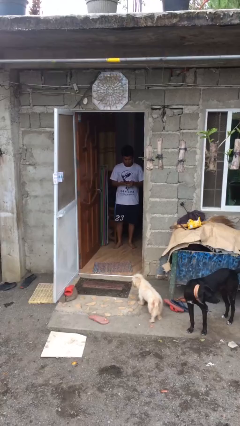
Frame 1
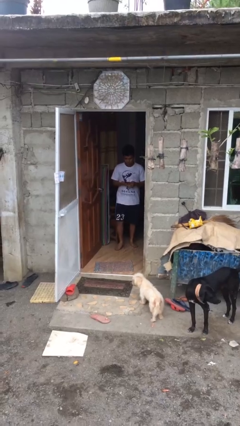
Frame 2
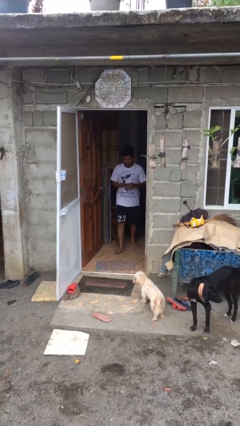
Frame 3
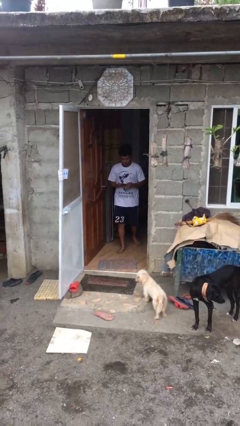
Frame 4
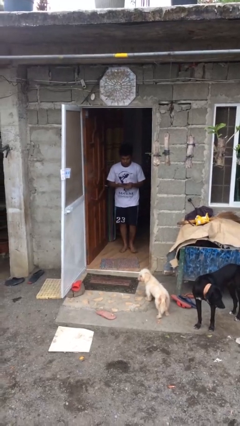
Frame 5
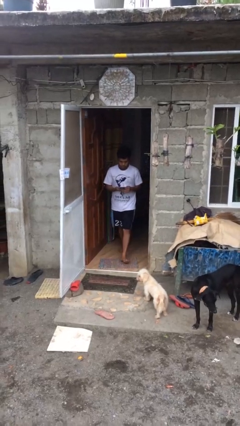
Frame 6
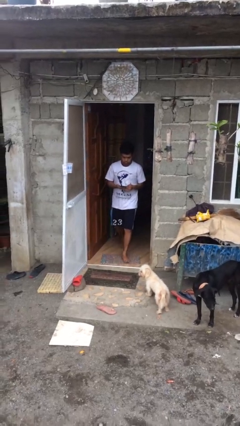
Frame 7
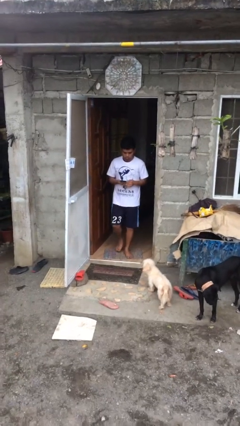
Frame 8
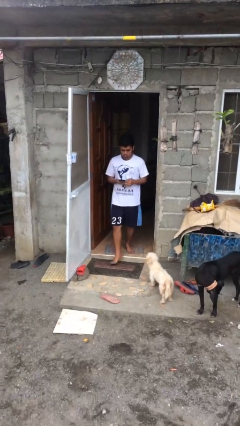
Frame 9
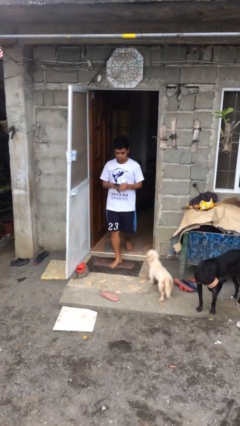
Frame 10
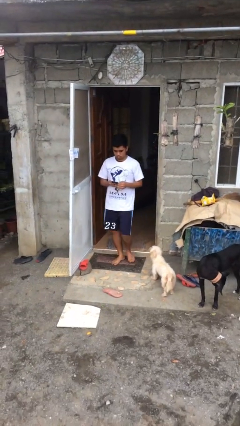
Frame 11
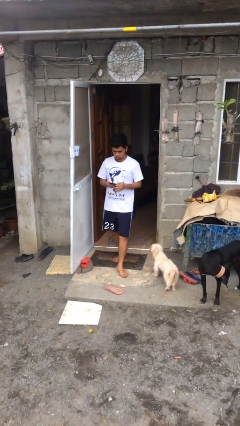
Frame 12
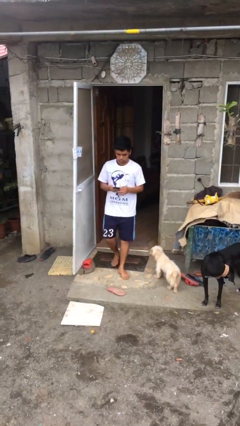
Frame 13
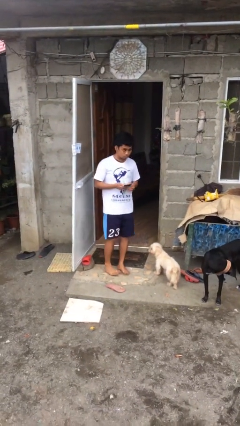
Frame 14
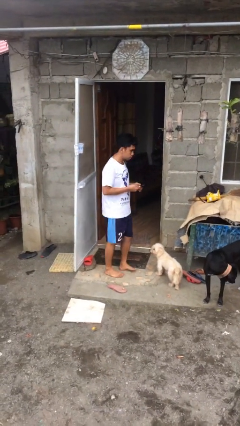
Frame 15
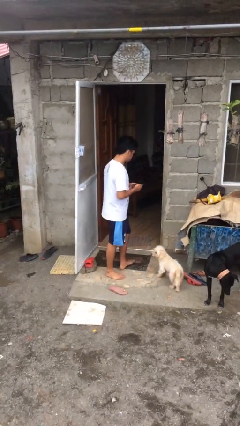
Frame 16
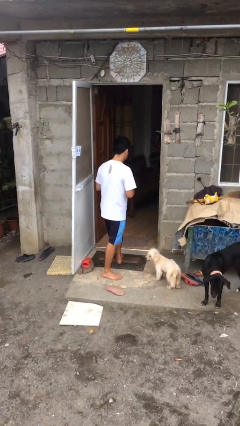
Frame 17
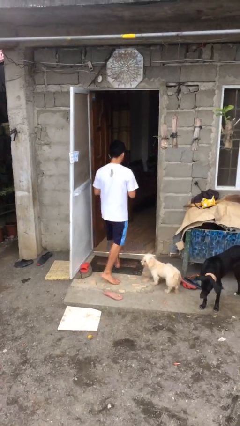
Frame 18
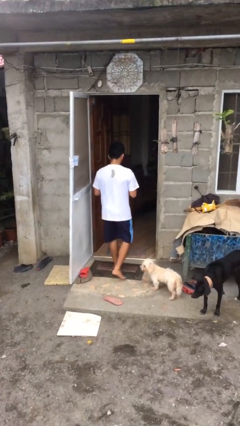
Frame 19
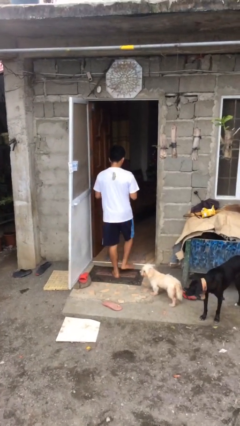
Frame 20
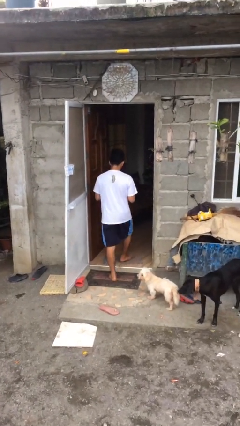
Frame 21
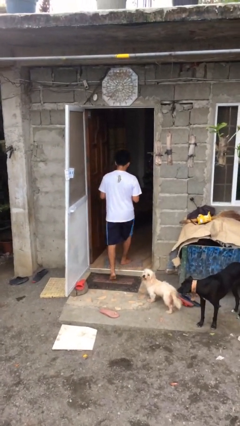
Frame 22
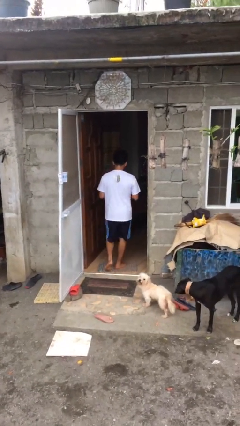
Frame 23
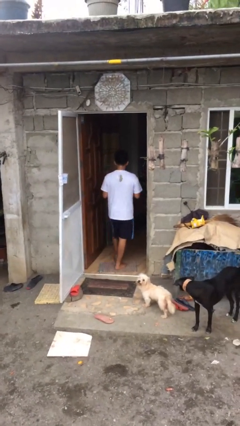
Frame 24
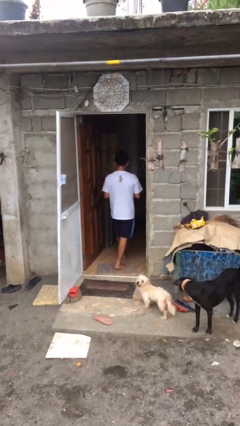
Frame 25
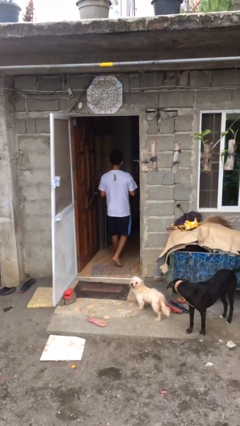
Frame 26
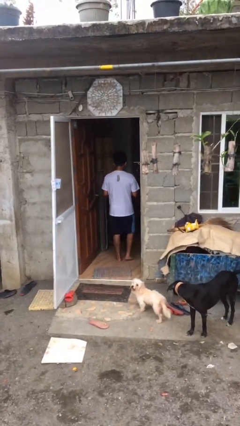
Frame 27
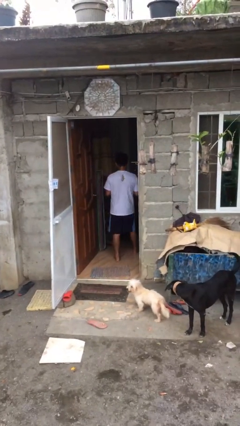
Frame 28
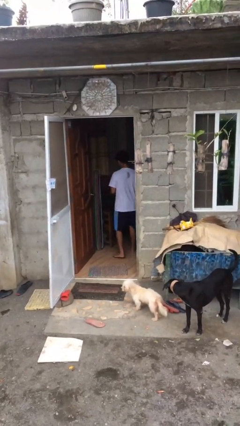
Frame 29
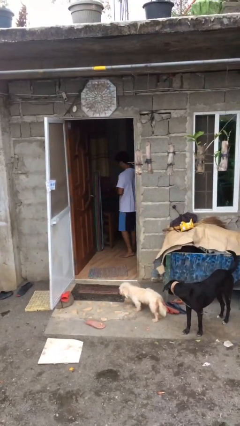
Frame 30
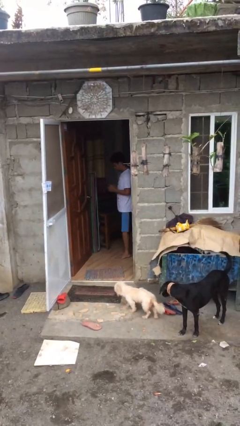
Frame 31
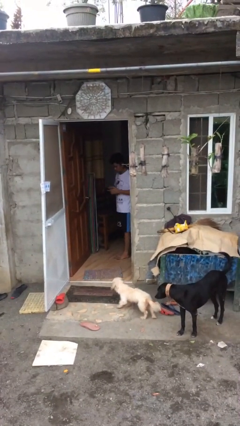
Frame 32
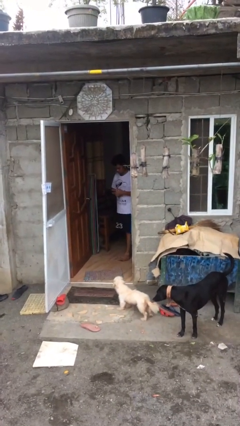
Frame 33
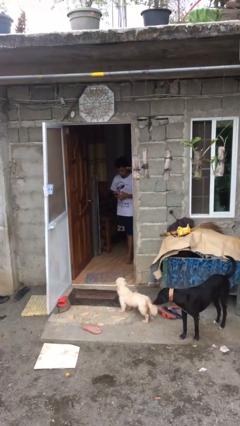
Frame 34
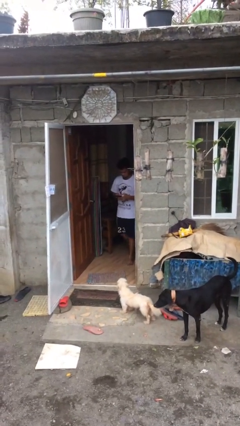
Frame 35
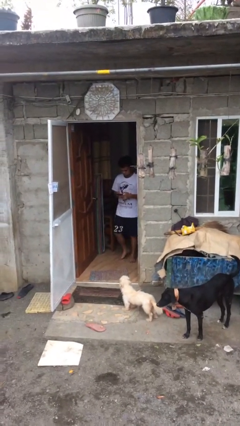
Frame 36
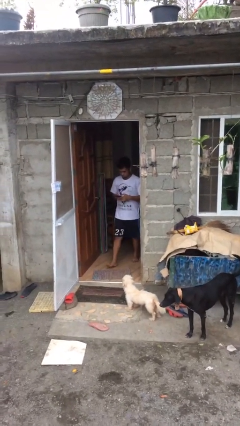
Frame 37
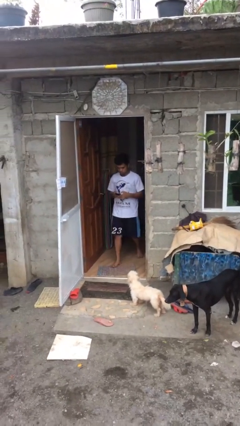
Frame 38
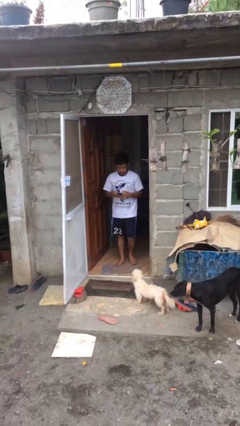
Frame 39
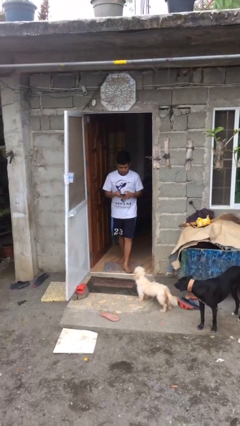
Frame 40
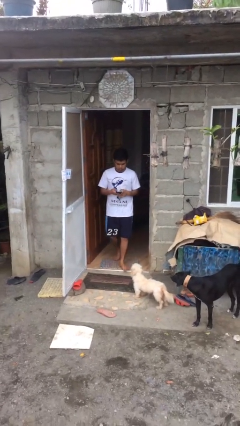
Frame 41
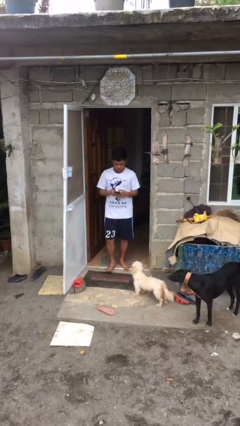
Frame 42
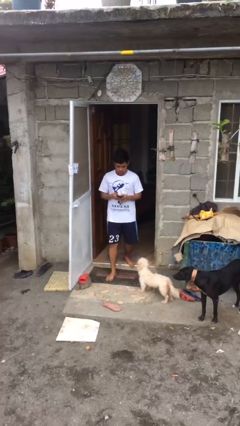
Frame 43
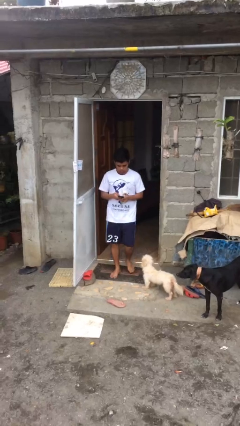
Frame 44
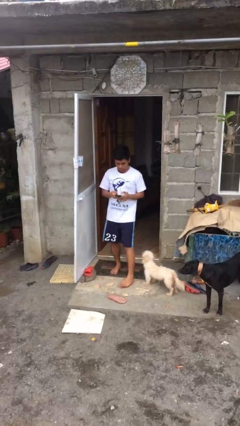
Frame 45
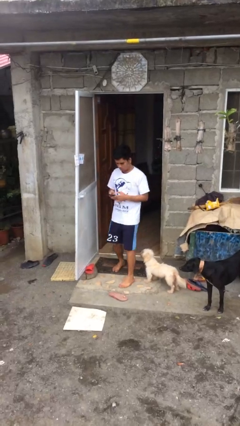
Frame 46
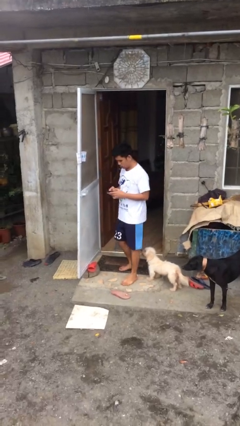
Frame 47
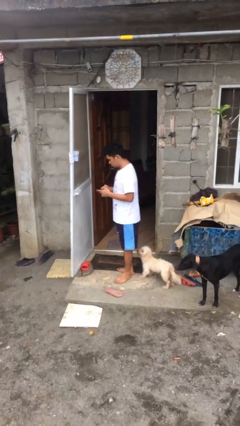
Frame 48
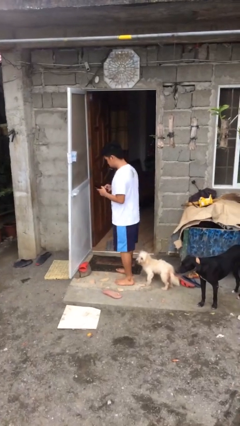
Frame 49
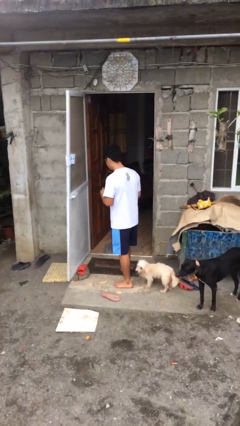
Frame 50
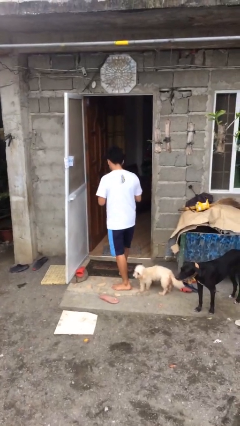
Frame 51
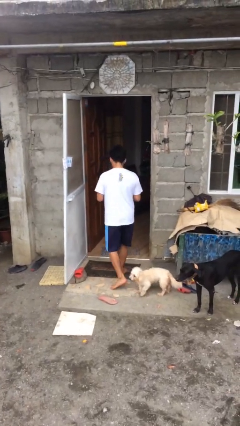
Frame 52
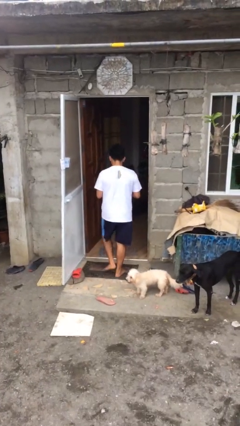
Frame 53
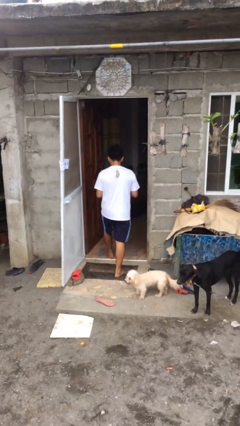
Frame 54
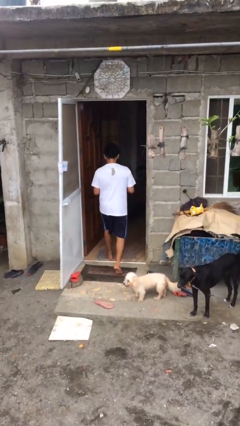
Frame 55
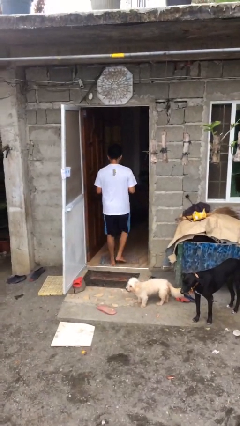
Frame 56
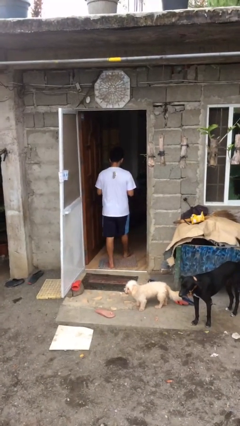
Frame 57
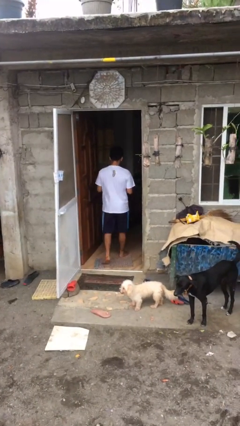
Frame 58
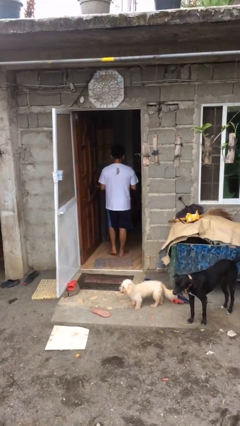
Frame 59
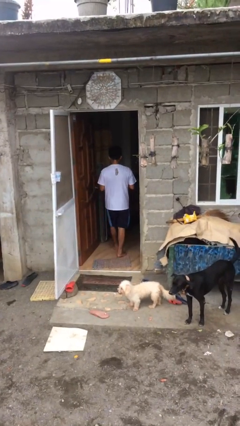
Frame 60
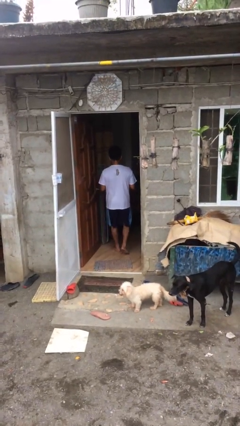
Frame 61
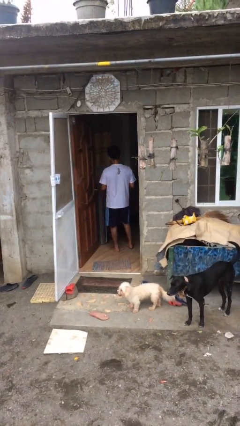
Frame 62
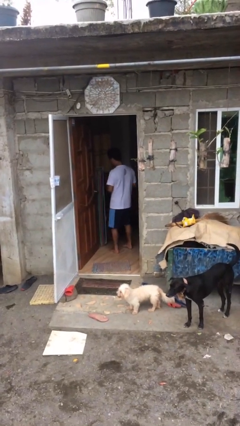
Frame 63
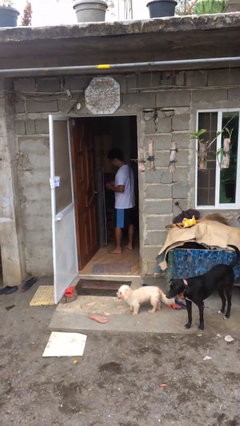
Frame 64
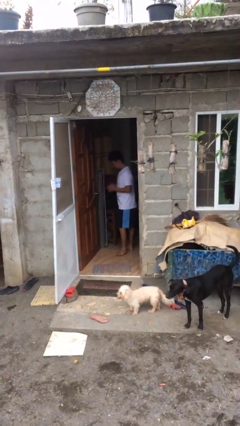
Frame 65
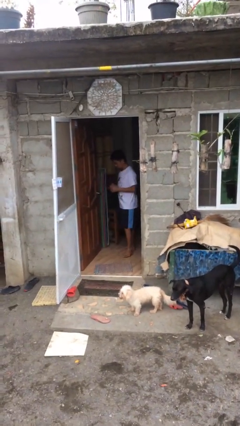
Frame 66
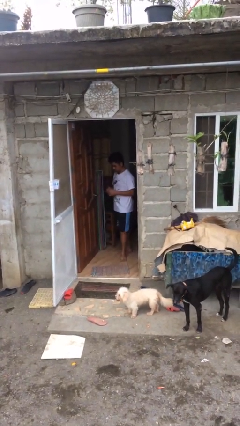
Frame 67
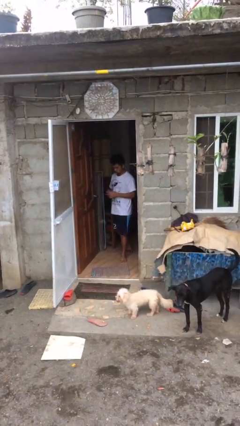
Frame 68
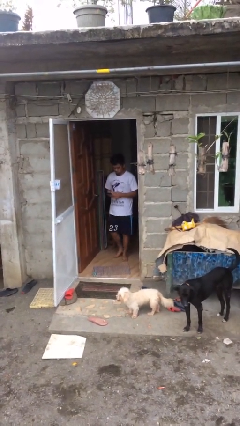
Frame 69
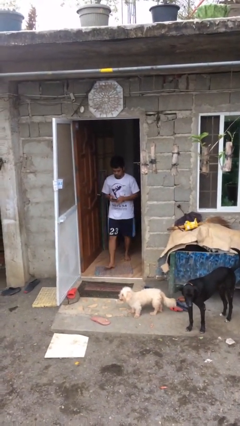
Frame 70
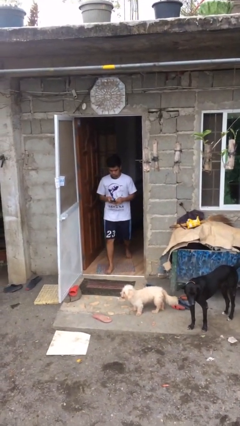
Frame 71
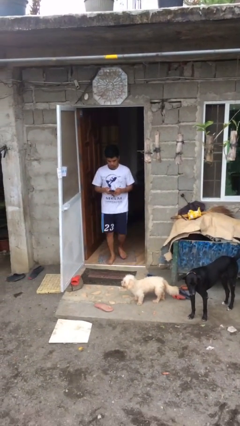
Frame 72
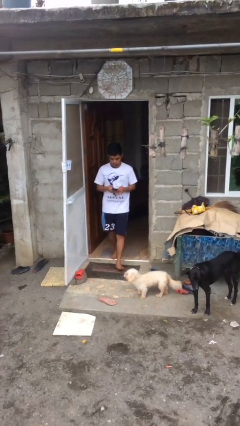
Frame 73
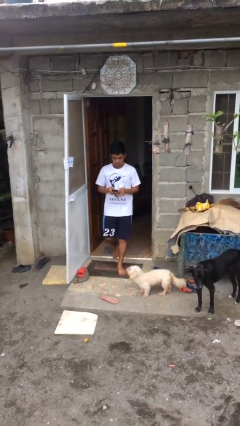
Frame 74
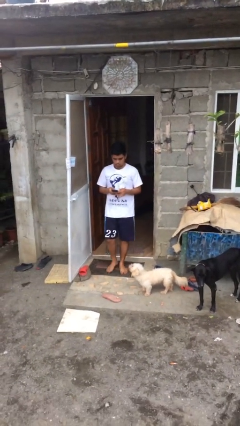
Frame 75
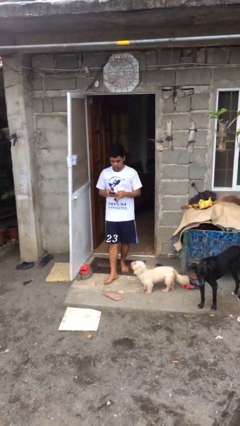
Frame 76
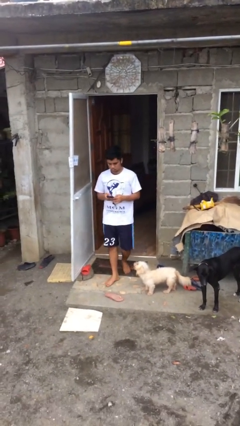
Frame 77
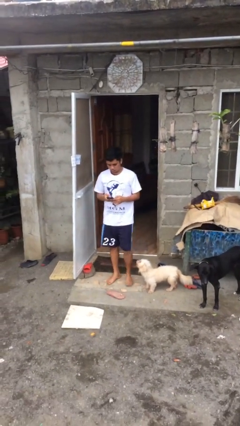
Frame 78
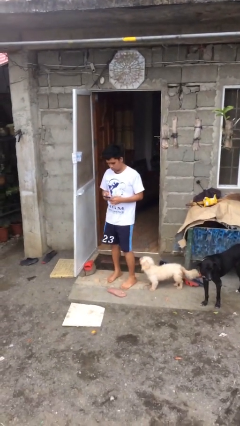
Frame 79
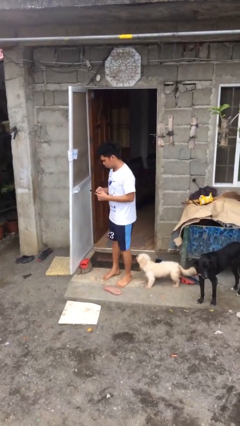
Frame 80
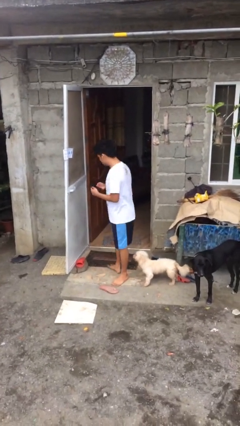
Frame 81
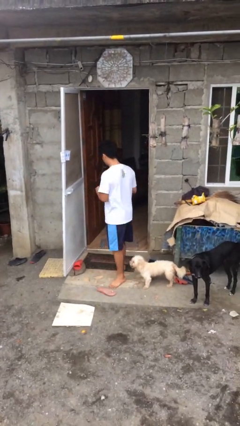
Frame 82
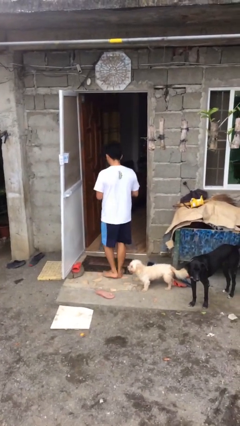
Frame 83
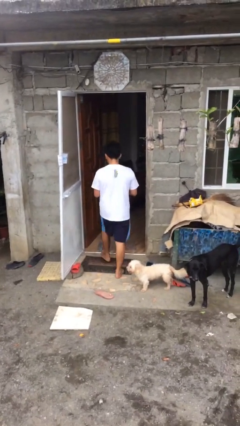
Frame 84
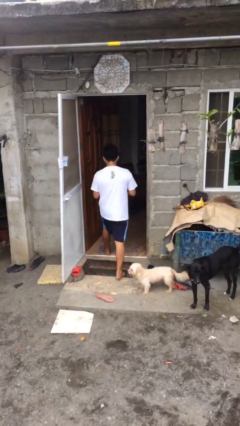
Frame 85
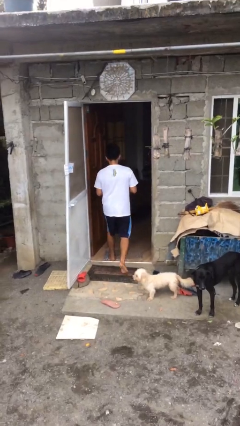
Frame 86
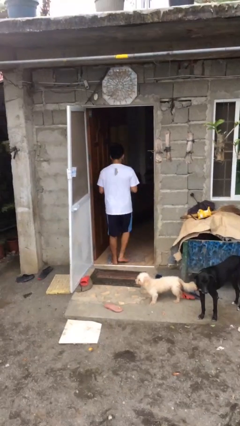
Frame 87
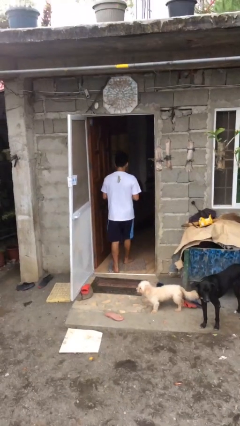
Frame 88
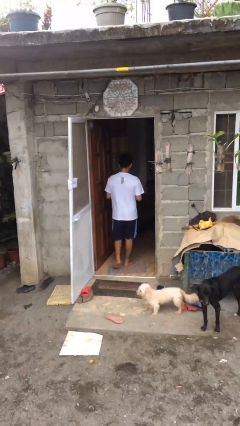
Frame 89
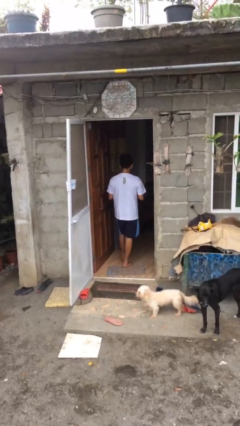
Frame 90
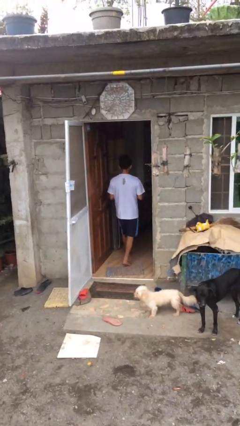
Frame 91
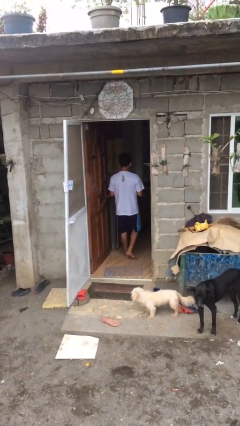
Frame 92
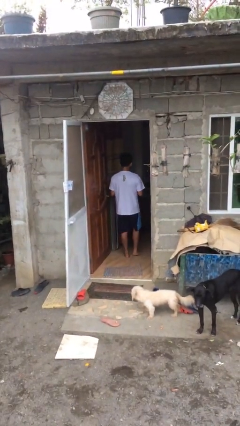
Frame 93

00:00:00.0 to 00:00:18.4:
person texts on phone

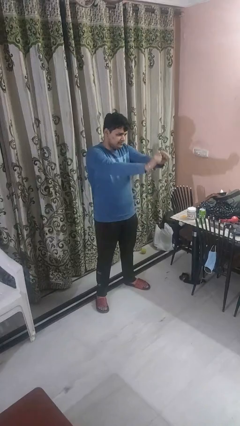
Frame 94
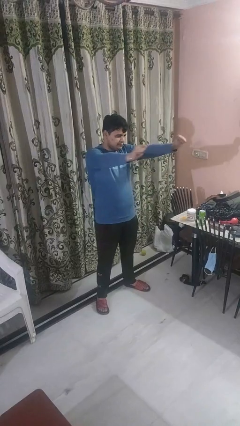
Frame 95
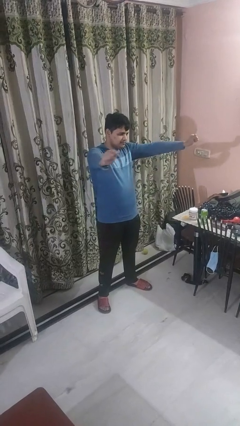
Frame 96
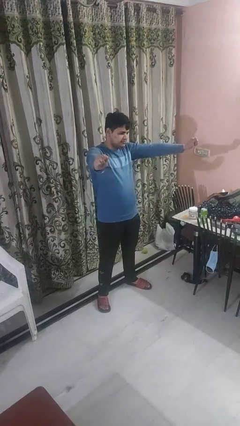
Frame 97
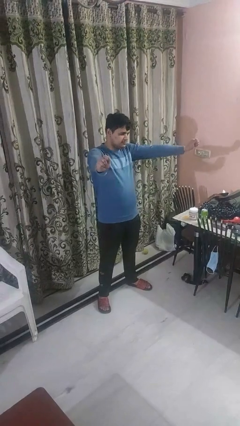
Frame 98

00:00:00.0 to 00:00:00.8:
person gestures zoom in
